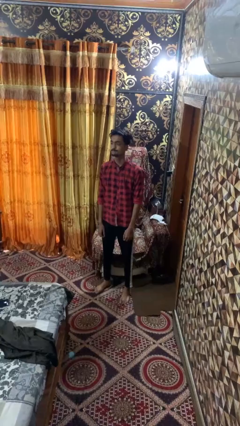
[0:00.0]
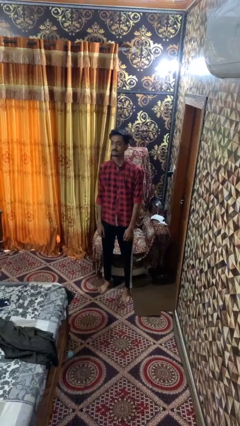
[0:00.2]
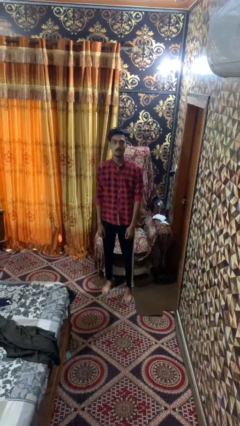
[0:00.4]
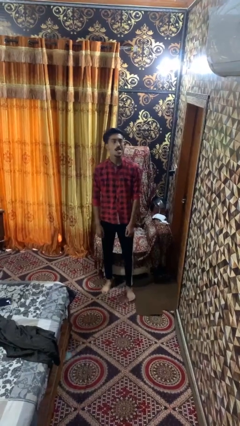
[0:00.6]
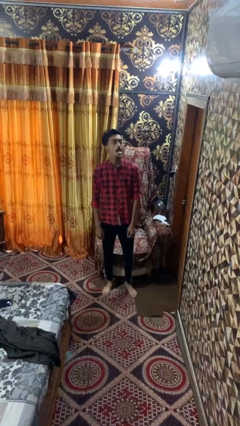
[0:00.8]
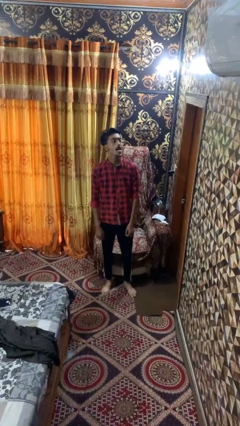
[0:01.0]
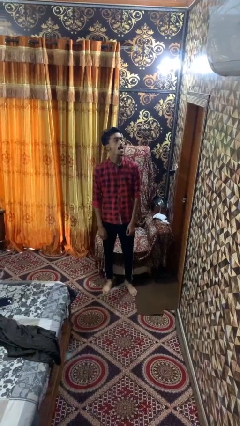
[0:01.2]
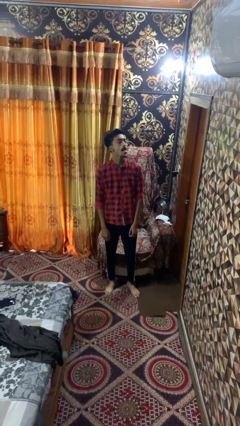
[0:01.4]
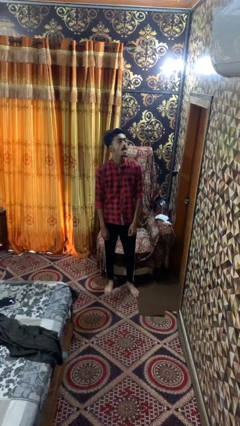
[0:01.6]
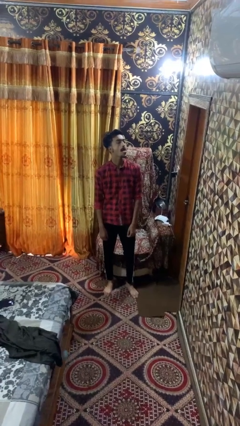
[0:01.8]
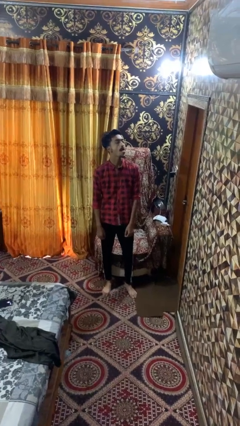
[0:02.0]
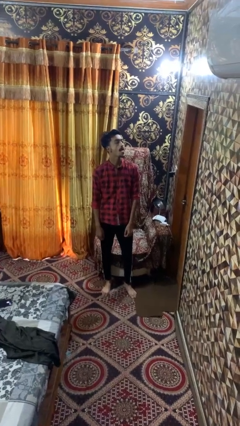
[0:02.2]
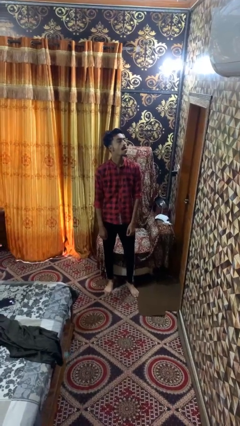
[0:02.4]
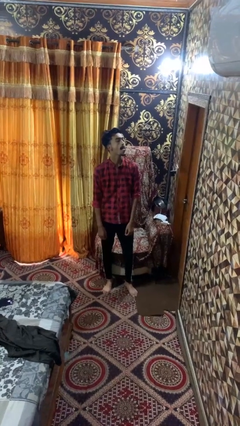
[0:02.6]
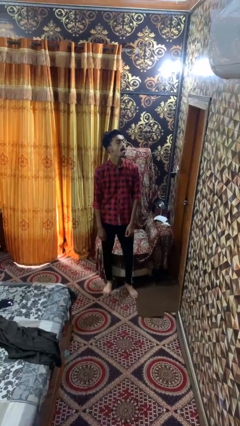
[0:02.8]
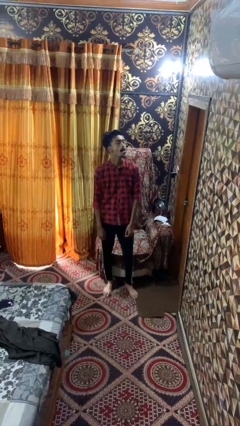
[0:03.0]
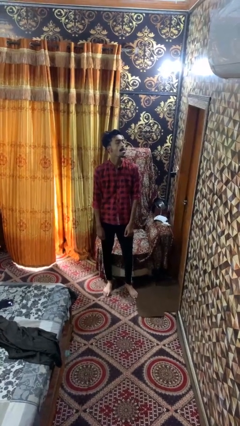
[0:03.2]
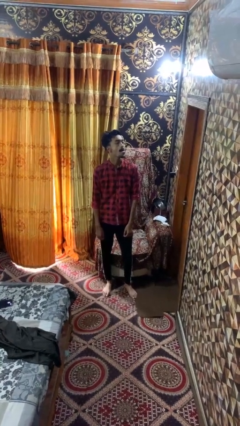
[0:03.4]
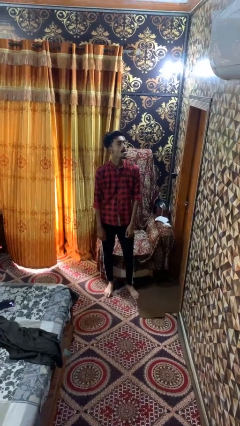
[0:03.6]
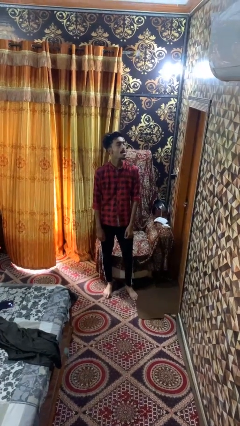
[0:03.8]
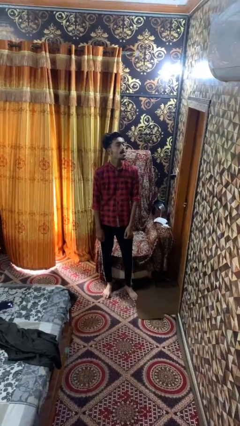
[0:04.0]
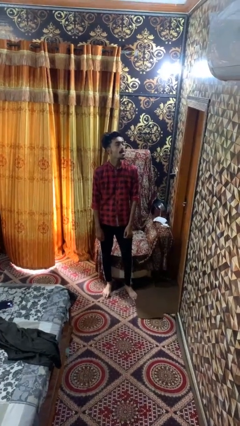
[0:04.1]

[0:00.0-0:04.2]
person sticks out tongue

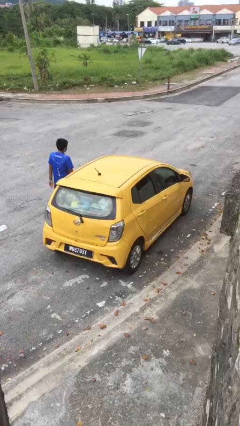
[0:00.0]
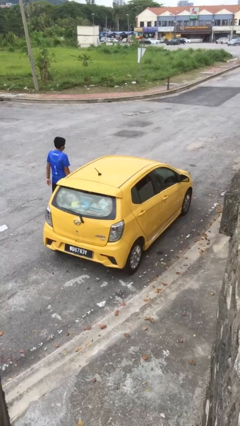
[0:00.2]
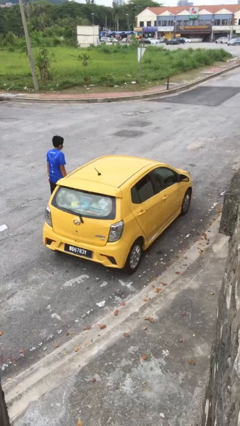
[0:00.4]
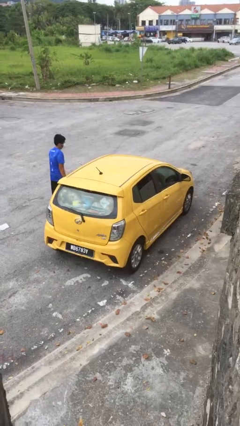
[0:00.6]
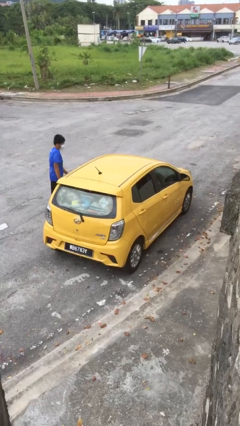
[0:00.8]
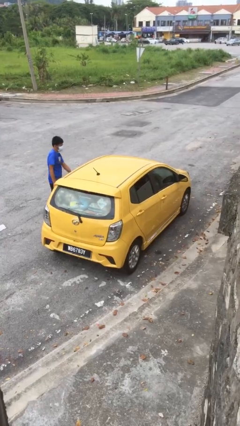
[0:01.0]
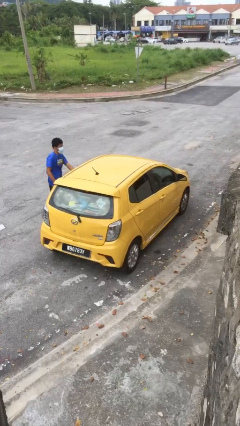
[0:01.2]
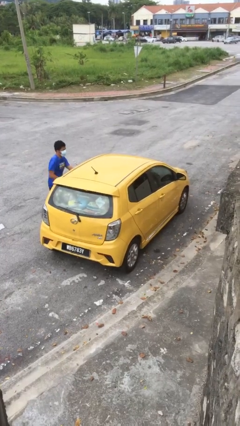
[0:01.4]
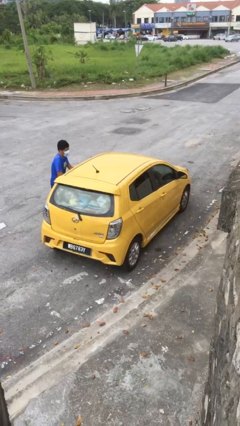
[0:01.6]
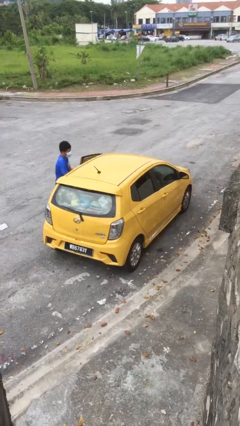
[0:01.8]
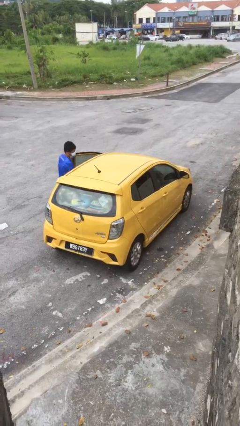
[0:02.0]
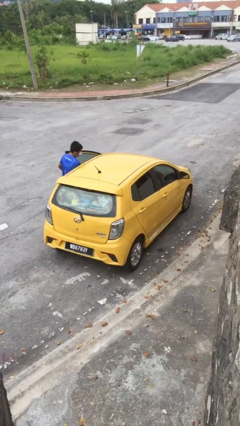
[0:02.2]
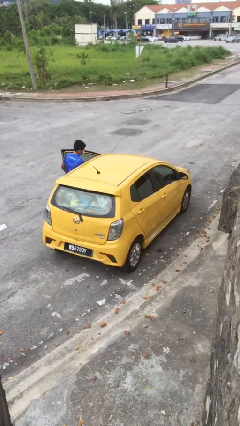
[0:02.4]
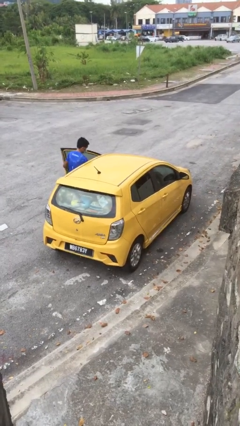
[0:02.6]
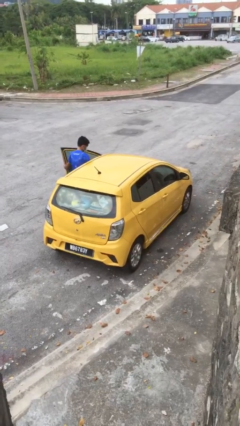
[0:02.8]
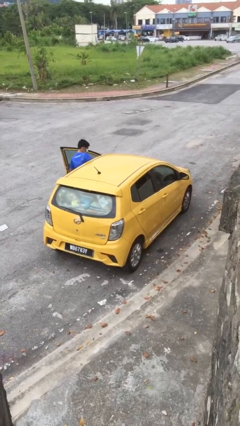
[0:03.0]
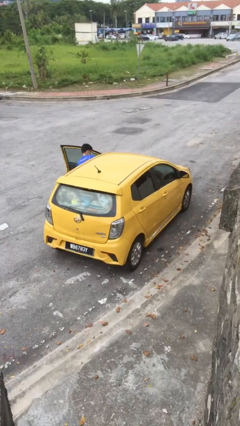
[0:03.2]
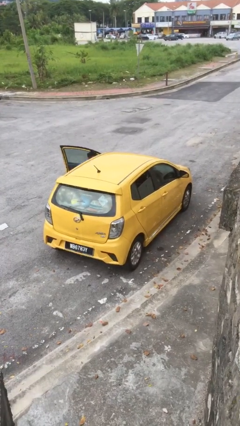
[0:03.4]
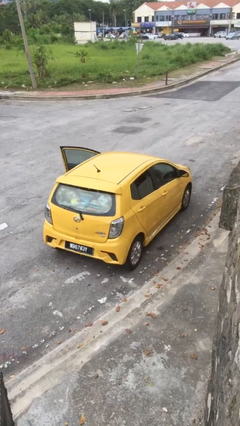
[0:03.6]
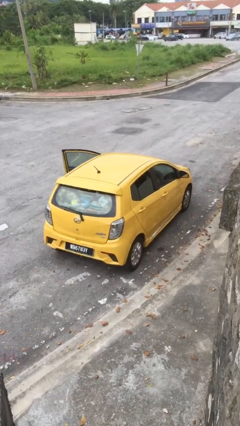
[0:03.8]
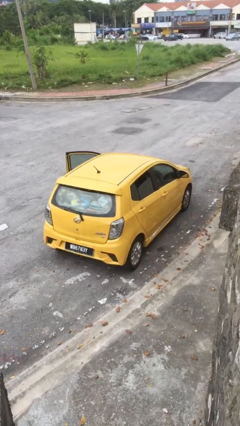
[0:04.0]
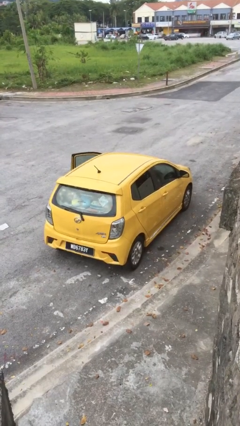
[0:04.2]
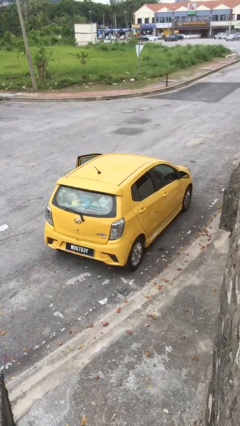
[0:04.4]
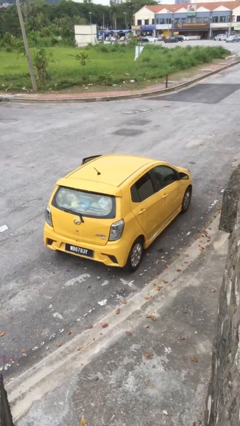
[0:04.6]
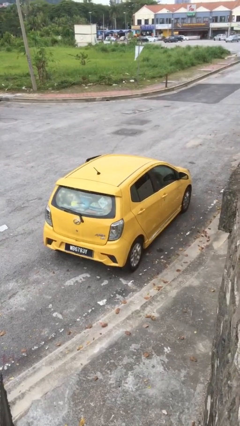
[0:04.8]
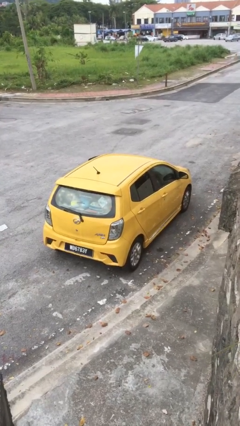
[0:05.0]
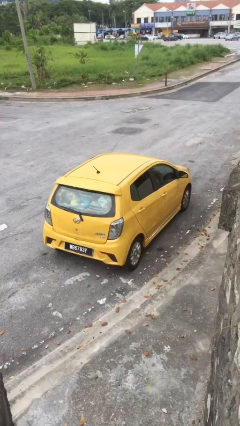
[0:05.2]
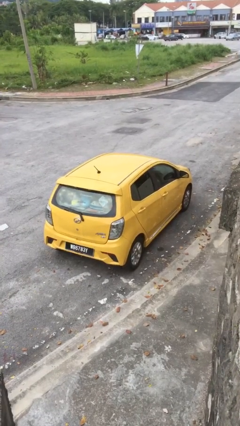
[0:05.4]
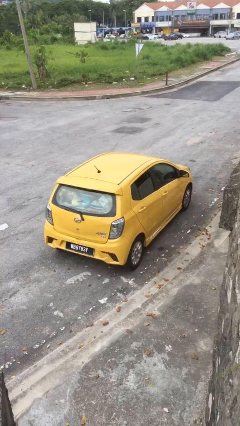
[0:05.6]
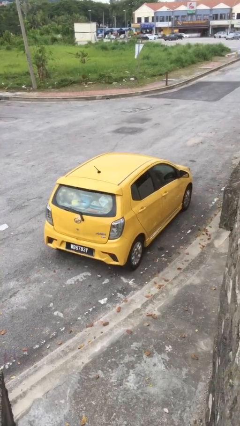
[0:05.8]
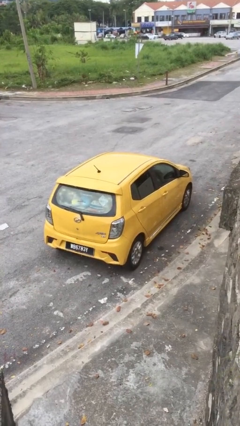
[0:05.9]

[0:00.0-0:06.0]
car picks up person

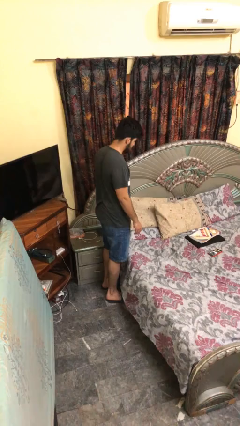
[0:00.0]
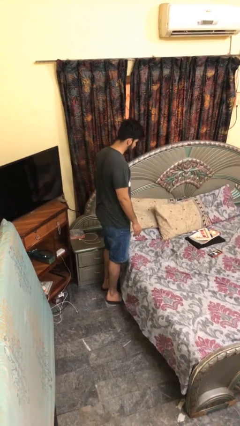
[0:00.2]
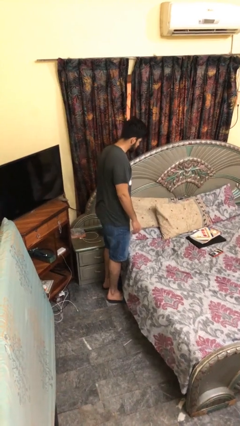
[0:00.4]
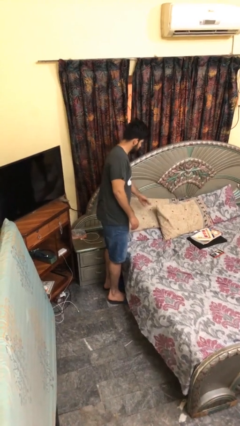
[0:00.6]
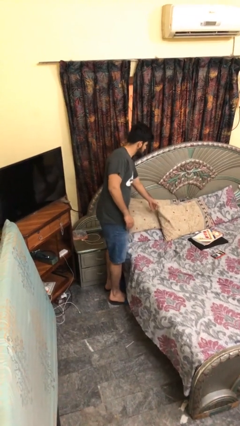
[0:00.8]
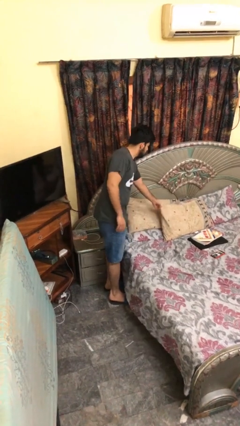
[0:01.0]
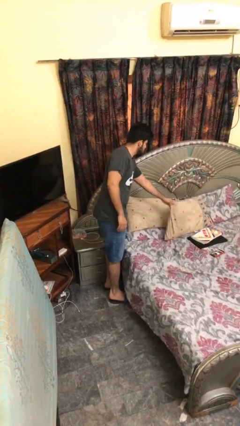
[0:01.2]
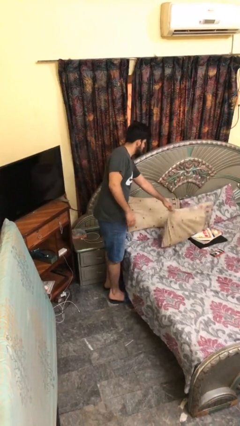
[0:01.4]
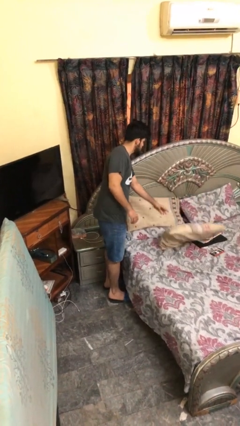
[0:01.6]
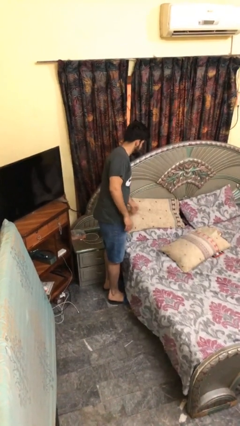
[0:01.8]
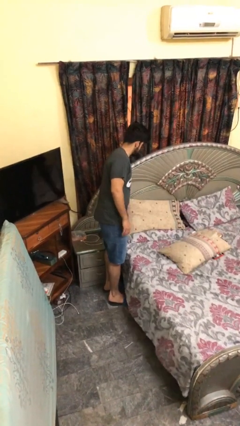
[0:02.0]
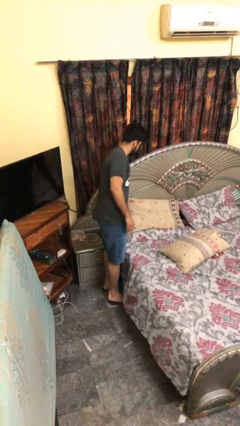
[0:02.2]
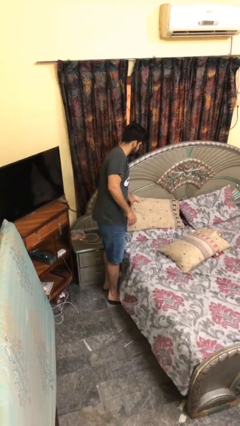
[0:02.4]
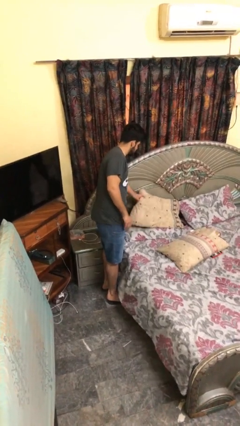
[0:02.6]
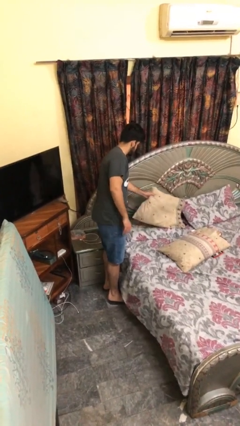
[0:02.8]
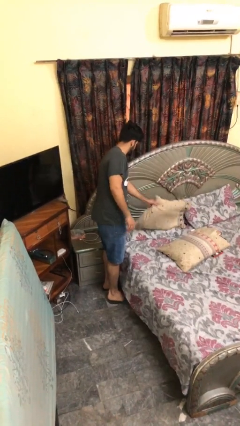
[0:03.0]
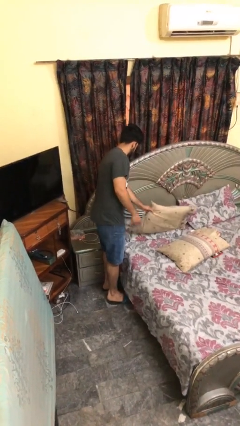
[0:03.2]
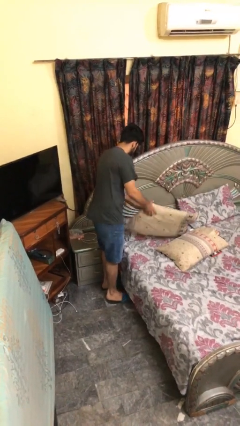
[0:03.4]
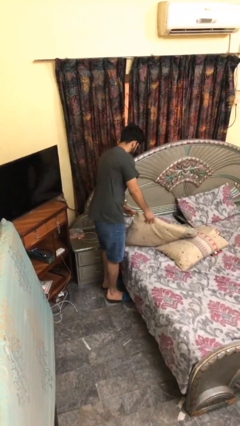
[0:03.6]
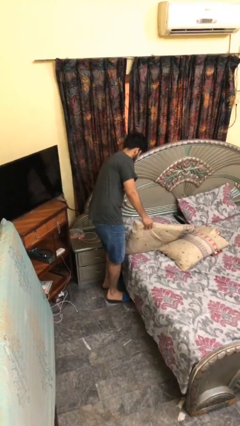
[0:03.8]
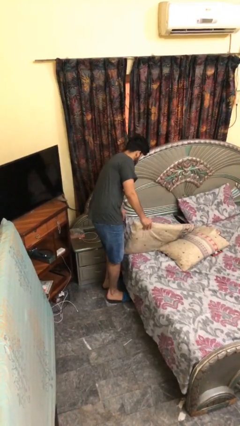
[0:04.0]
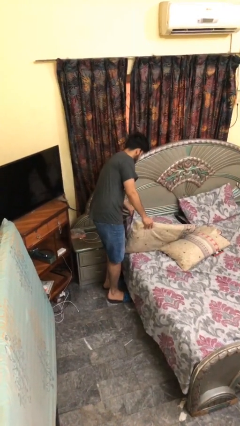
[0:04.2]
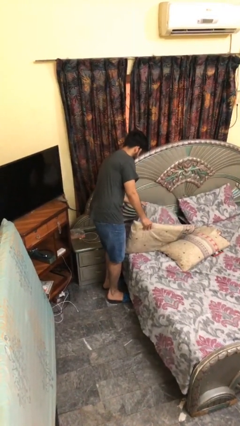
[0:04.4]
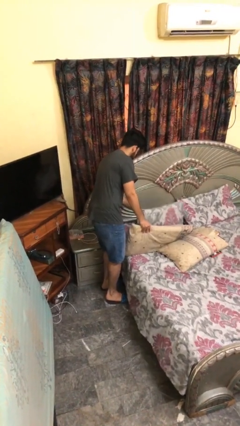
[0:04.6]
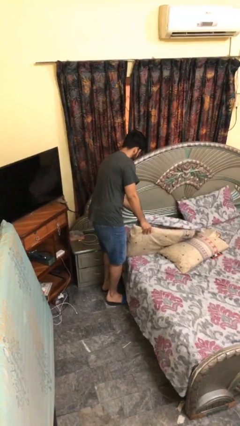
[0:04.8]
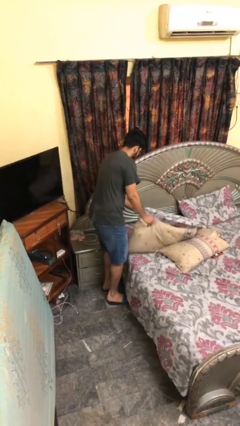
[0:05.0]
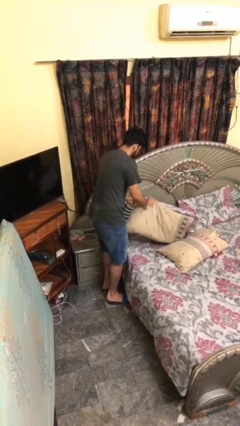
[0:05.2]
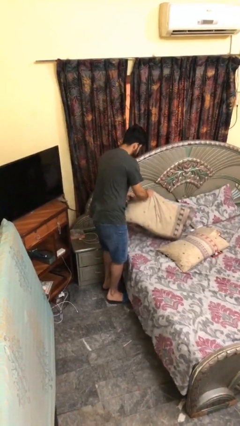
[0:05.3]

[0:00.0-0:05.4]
person searches under bed

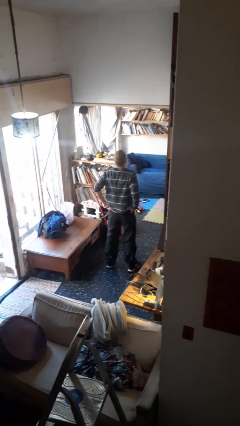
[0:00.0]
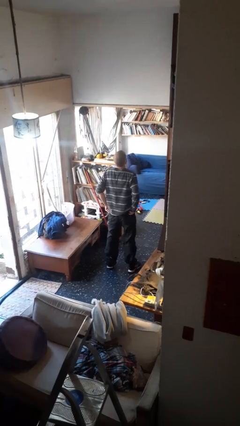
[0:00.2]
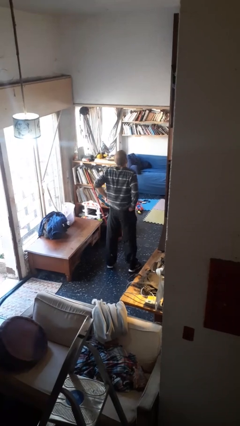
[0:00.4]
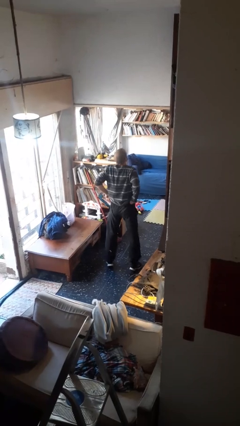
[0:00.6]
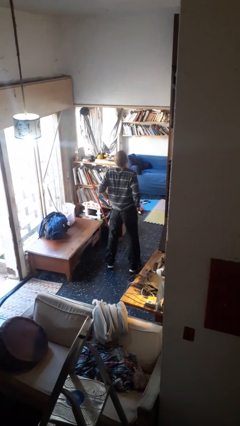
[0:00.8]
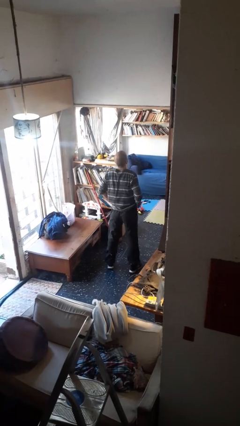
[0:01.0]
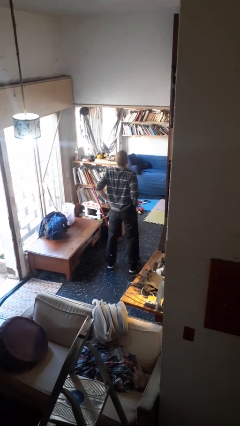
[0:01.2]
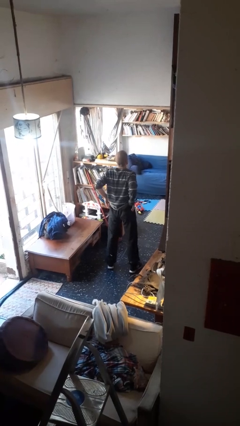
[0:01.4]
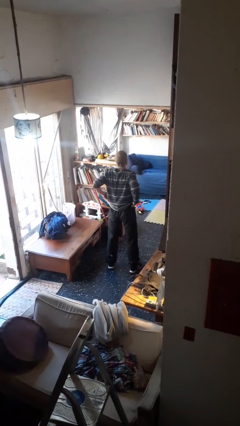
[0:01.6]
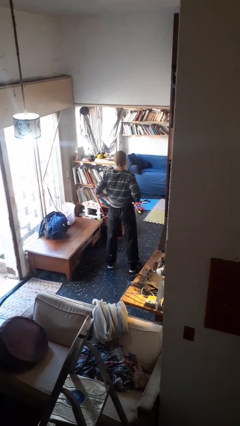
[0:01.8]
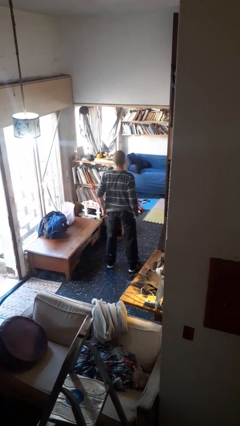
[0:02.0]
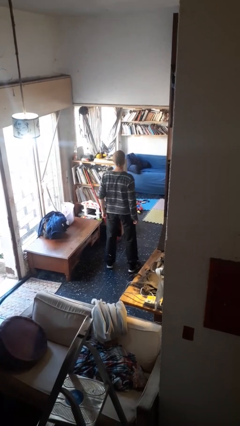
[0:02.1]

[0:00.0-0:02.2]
person hikes up pants
